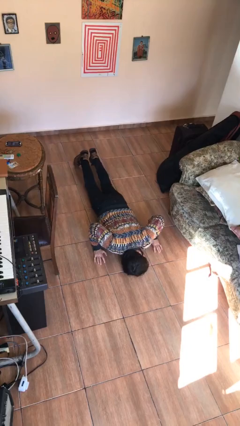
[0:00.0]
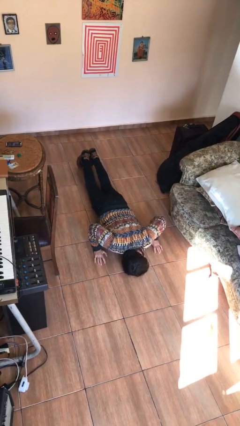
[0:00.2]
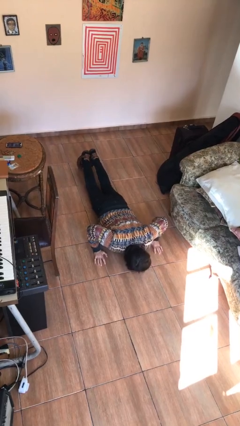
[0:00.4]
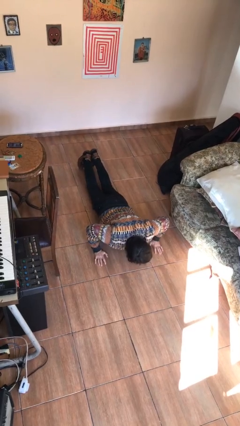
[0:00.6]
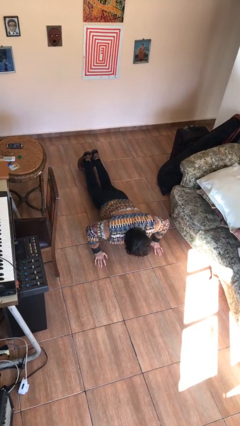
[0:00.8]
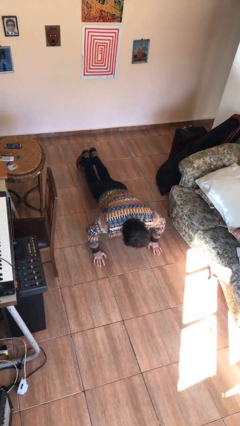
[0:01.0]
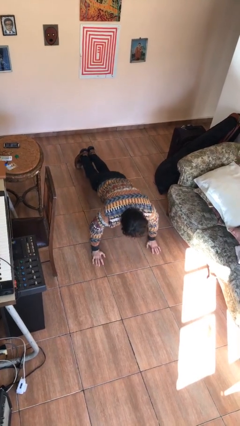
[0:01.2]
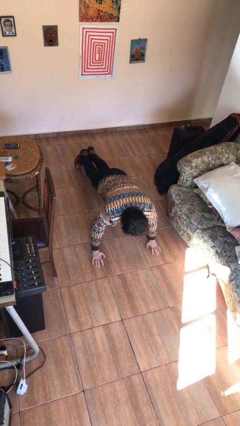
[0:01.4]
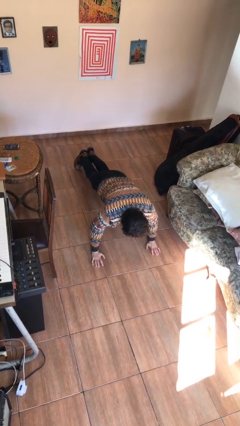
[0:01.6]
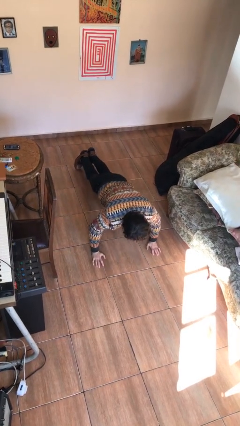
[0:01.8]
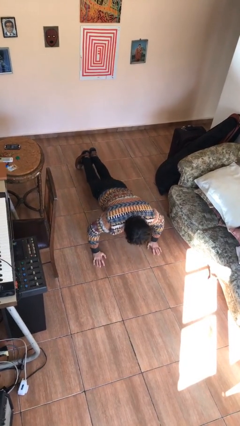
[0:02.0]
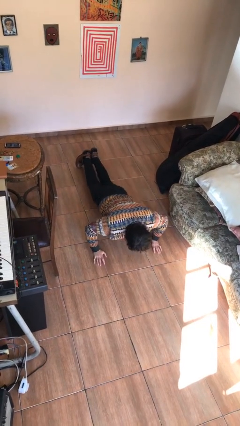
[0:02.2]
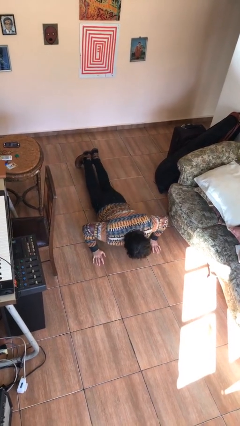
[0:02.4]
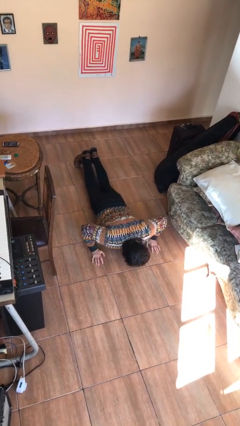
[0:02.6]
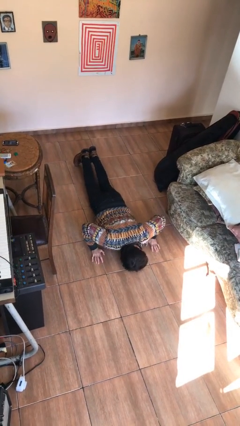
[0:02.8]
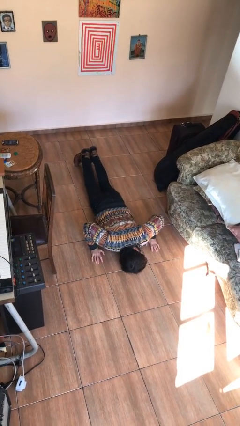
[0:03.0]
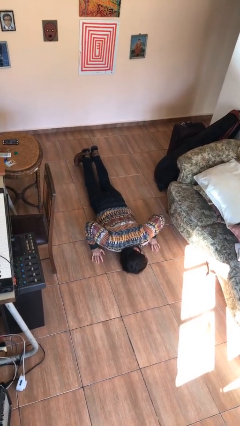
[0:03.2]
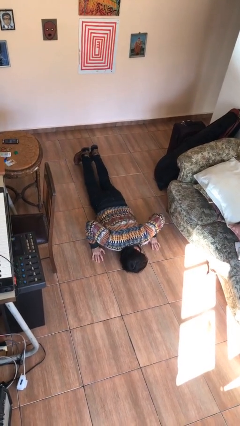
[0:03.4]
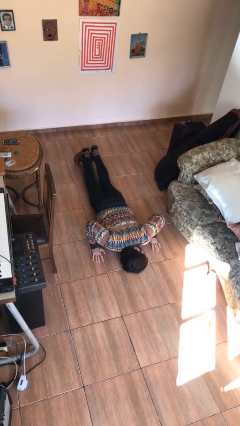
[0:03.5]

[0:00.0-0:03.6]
person exercises with pushup

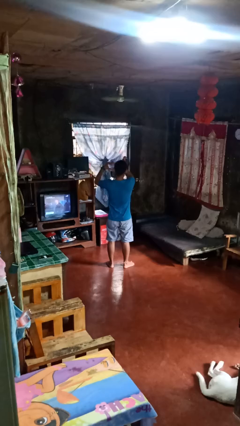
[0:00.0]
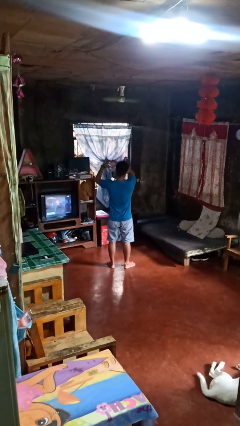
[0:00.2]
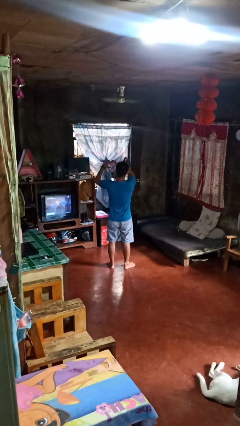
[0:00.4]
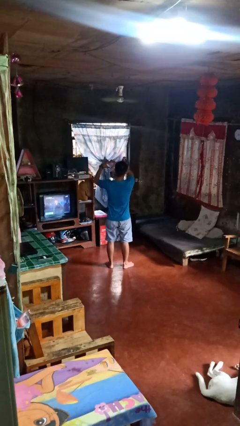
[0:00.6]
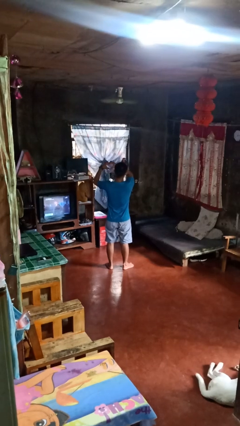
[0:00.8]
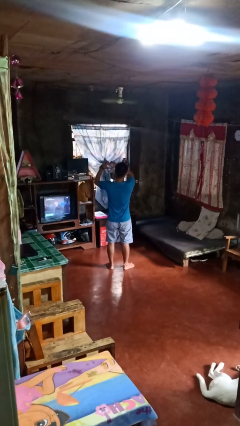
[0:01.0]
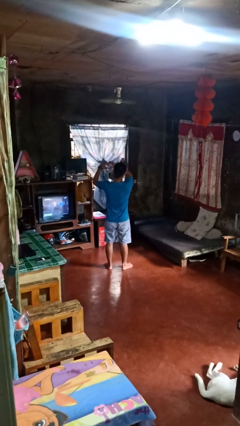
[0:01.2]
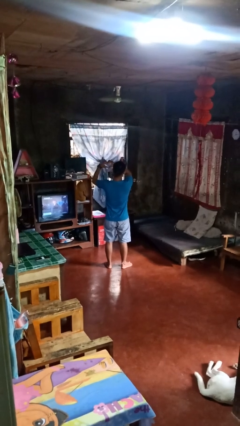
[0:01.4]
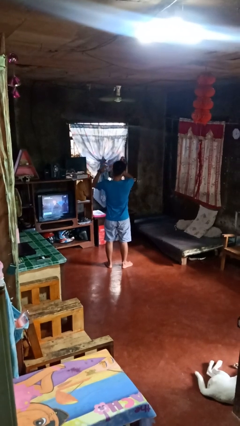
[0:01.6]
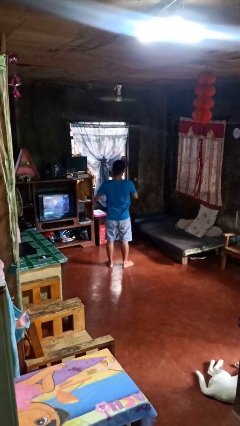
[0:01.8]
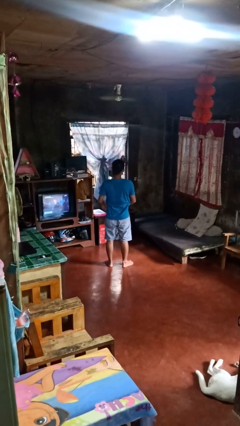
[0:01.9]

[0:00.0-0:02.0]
person gestures heart

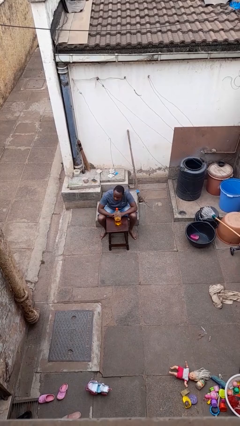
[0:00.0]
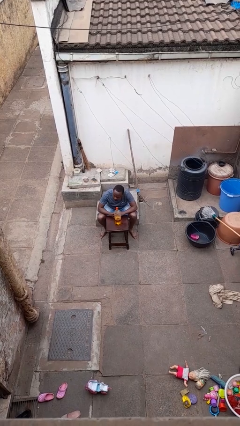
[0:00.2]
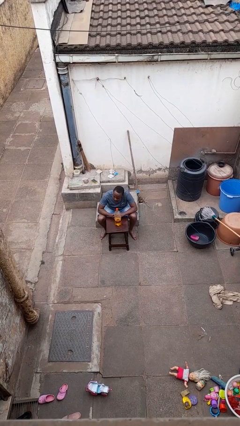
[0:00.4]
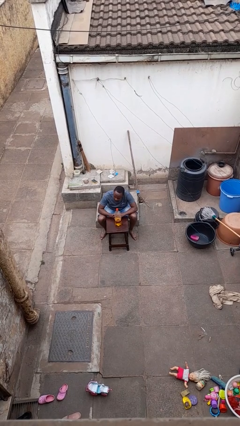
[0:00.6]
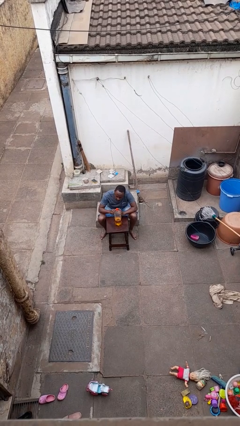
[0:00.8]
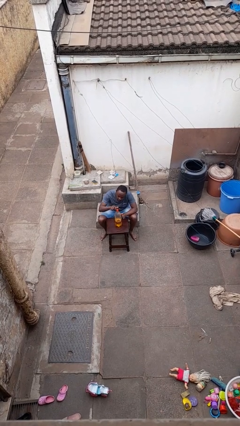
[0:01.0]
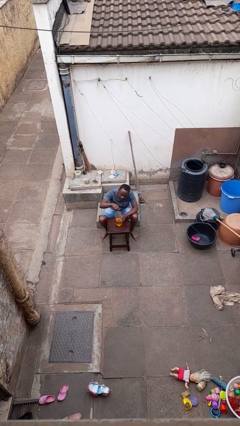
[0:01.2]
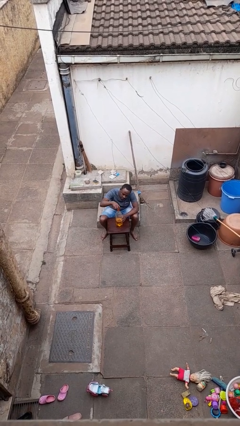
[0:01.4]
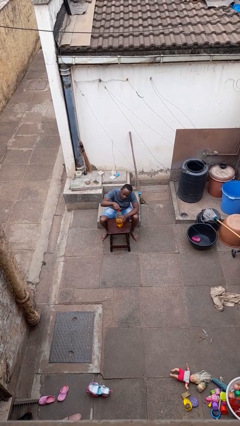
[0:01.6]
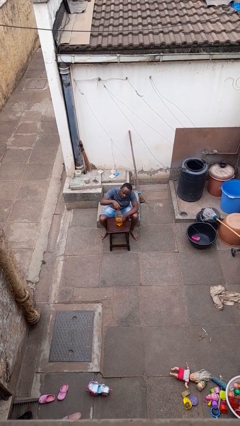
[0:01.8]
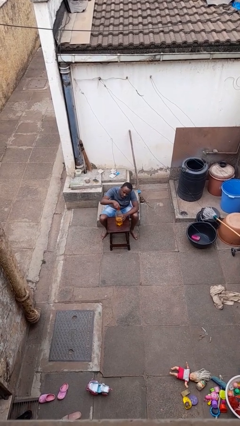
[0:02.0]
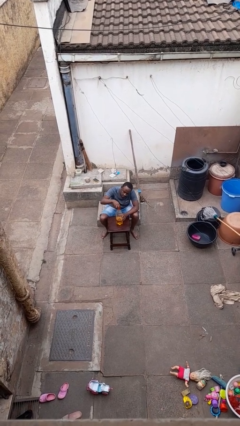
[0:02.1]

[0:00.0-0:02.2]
person unscrews lid from bottle

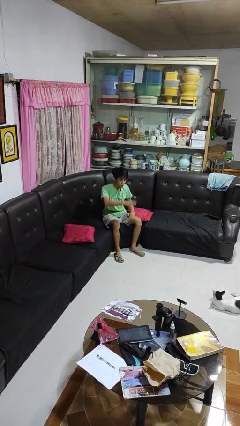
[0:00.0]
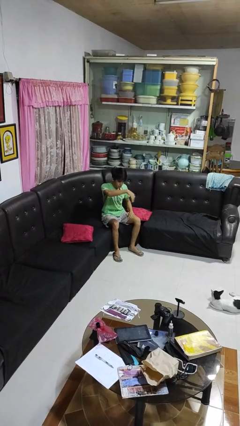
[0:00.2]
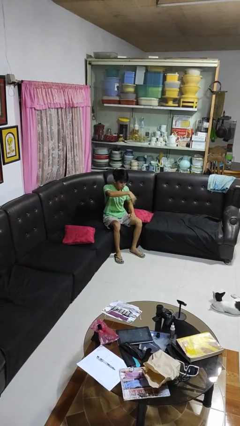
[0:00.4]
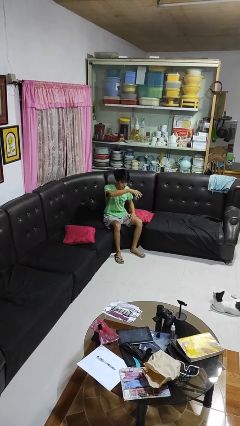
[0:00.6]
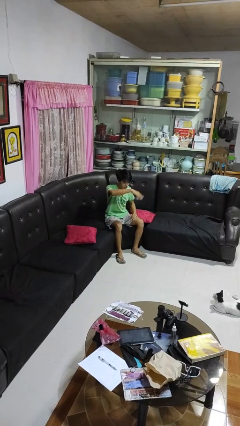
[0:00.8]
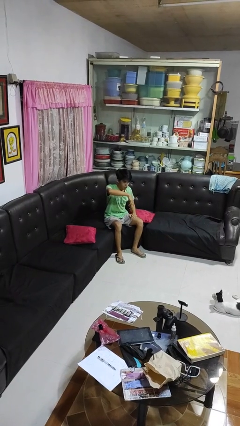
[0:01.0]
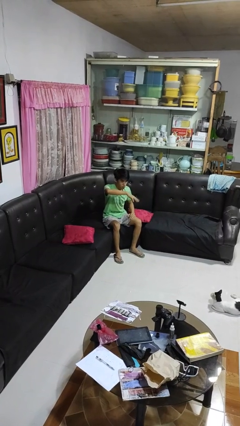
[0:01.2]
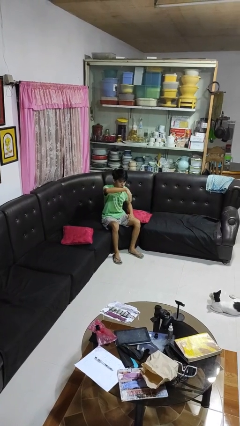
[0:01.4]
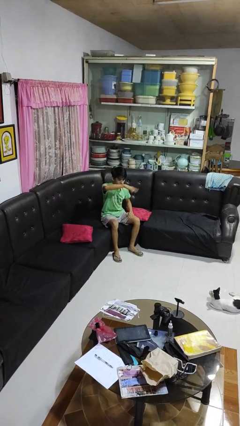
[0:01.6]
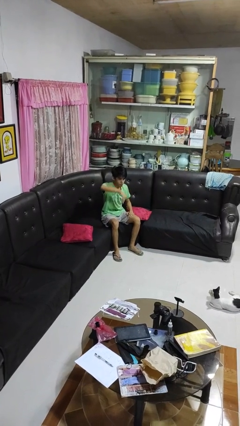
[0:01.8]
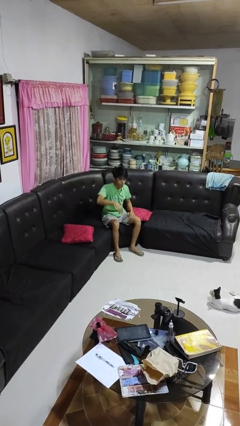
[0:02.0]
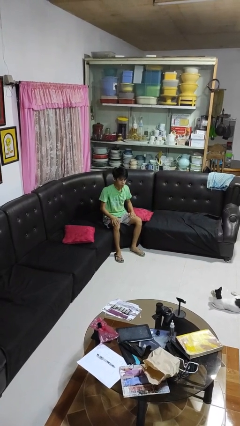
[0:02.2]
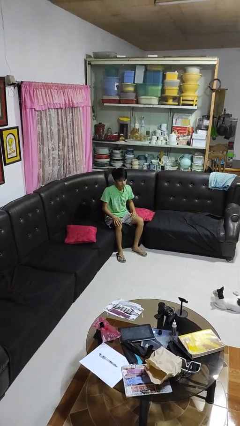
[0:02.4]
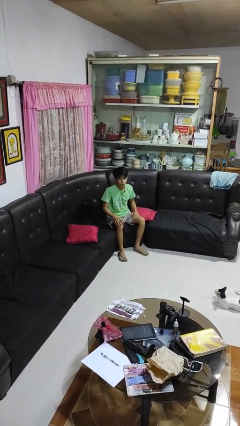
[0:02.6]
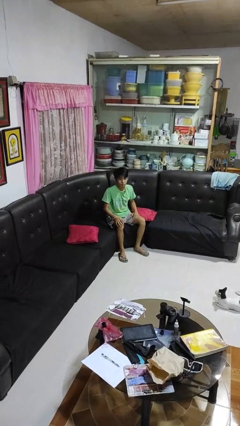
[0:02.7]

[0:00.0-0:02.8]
person gestures come here

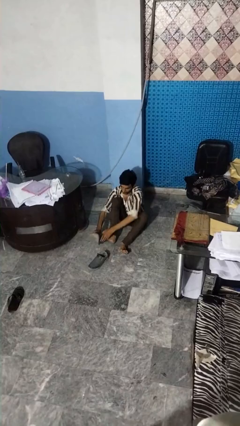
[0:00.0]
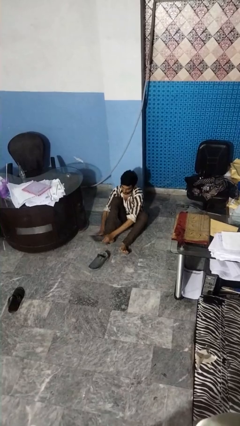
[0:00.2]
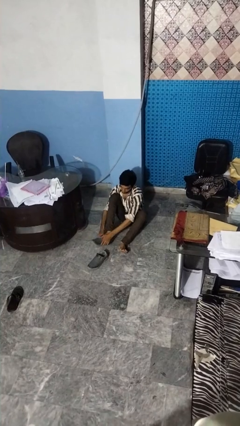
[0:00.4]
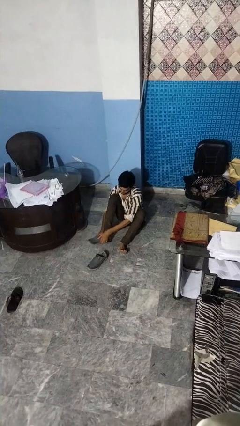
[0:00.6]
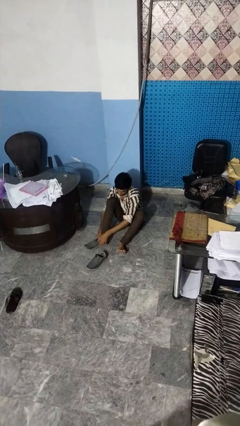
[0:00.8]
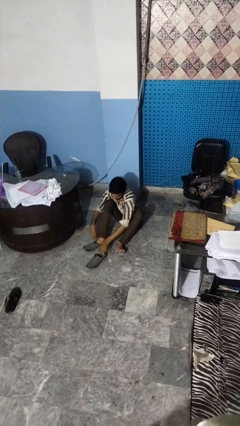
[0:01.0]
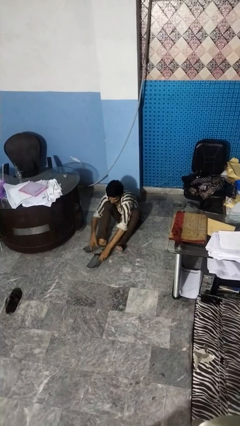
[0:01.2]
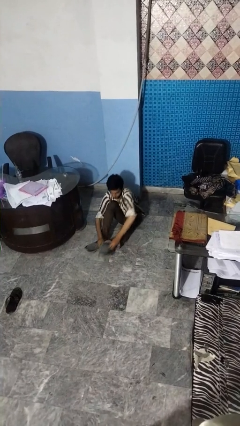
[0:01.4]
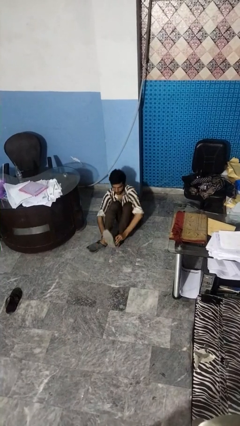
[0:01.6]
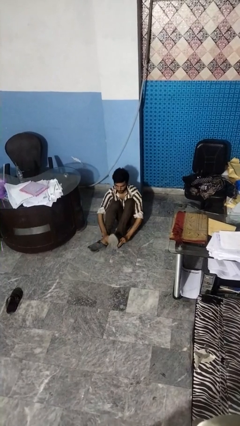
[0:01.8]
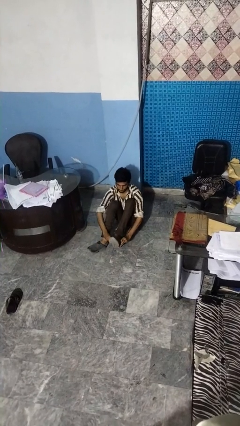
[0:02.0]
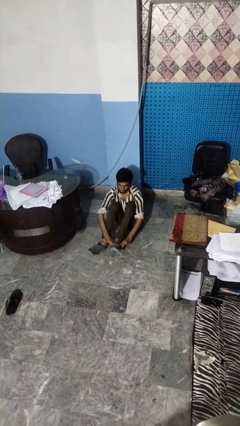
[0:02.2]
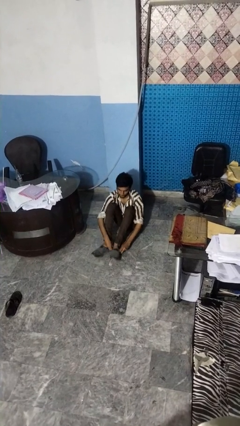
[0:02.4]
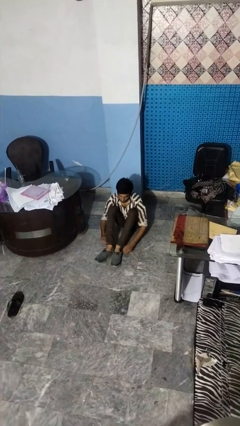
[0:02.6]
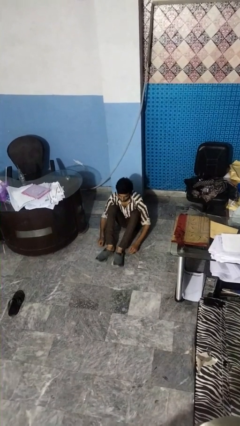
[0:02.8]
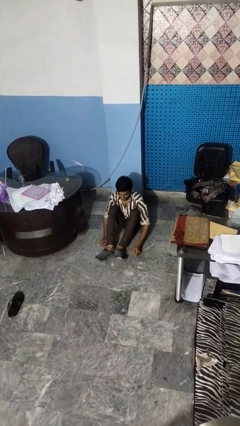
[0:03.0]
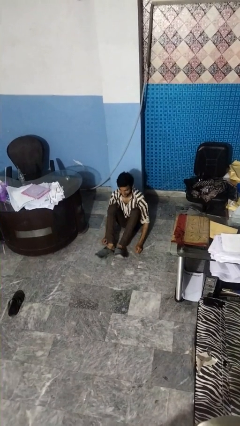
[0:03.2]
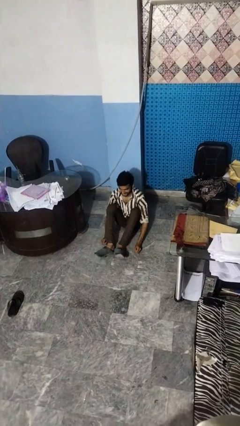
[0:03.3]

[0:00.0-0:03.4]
person puts on shoes

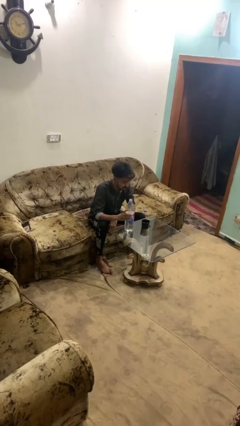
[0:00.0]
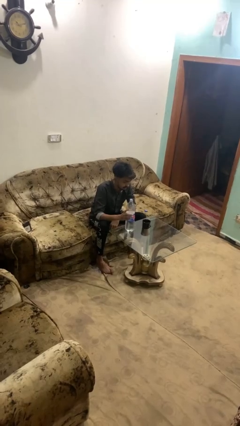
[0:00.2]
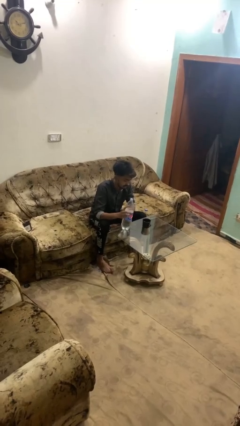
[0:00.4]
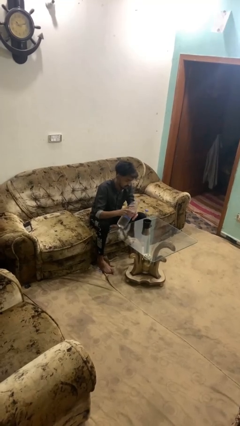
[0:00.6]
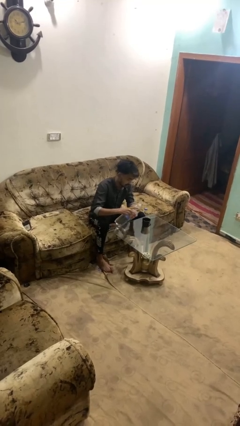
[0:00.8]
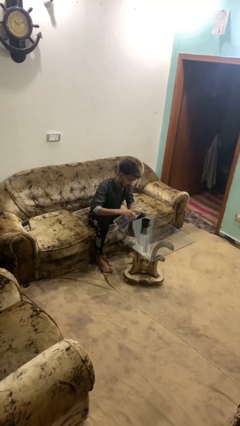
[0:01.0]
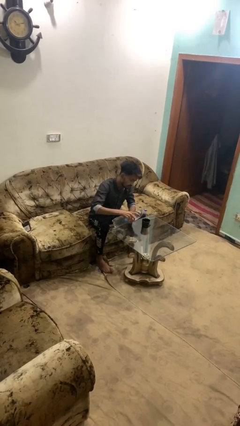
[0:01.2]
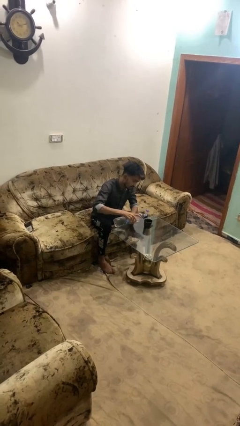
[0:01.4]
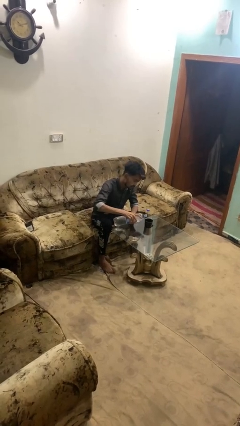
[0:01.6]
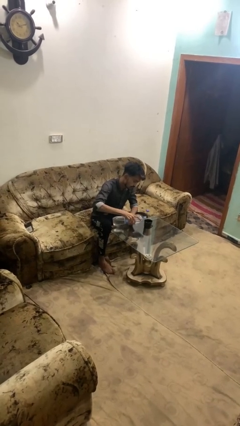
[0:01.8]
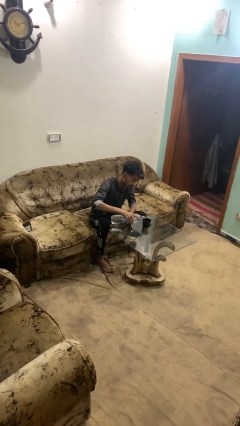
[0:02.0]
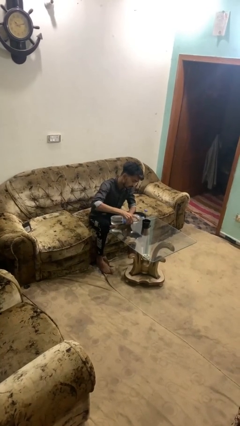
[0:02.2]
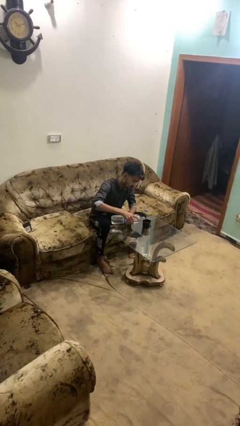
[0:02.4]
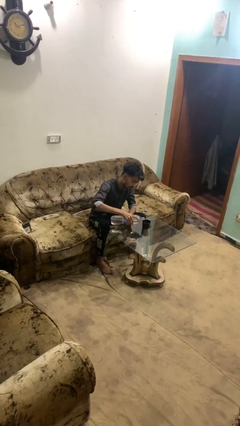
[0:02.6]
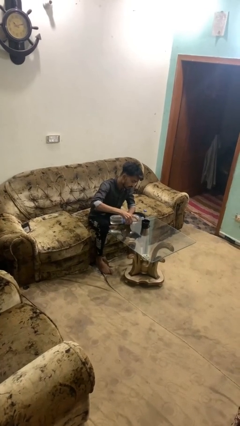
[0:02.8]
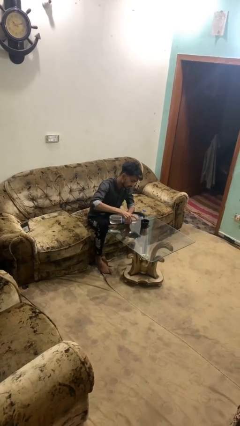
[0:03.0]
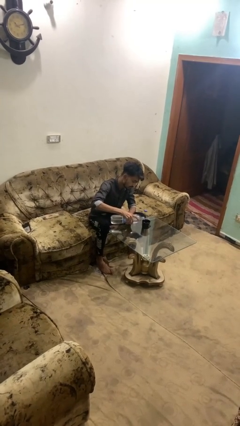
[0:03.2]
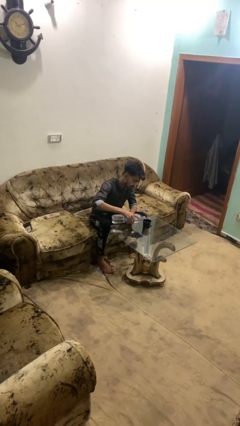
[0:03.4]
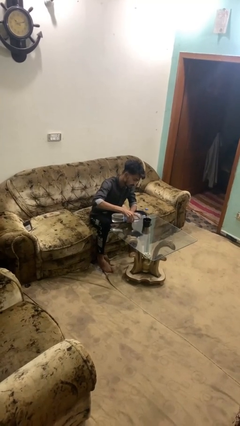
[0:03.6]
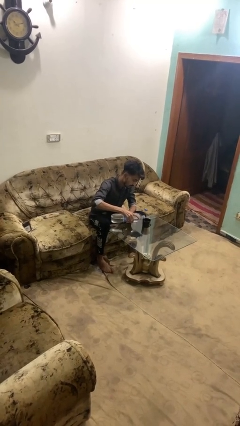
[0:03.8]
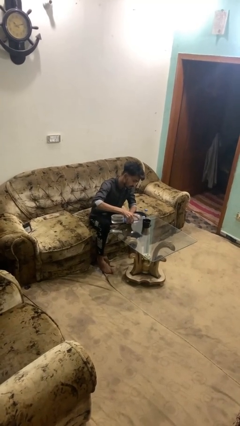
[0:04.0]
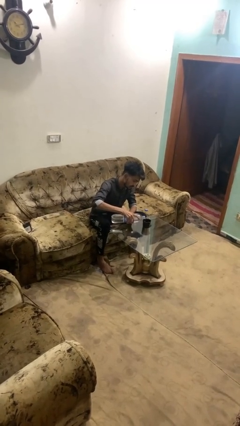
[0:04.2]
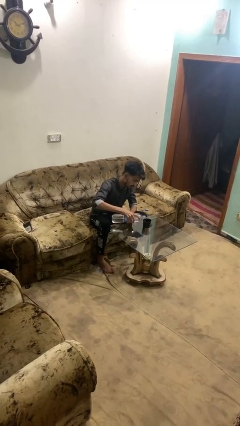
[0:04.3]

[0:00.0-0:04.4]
person pours liquid into cup
